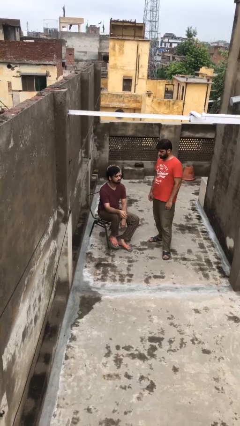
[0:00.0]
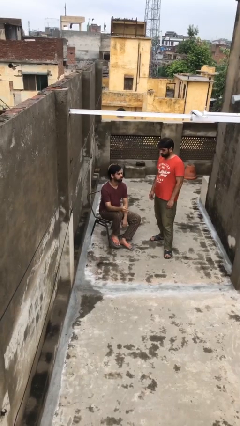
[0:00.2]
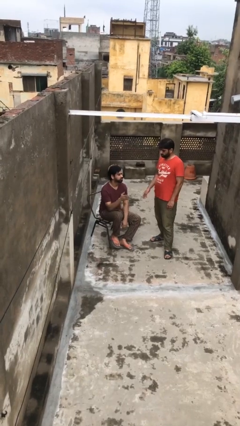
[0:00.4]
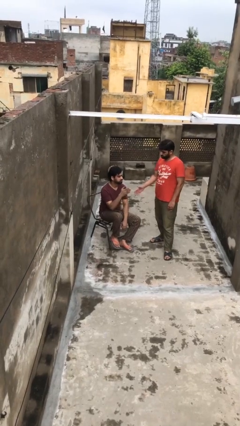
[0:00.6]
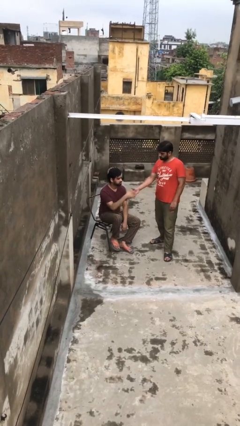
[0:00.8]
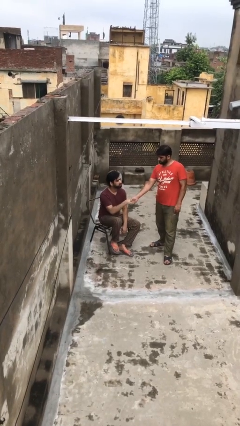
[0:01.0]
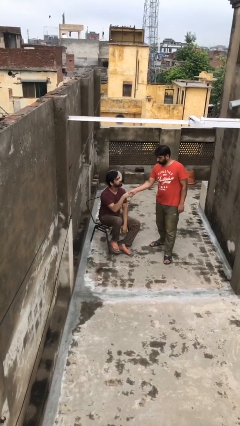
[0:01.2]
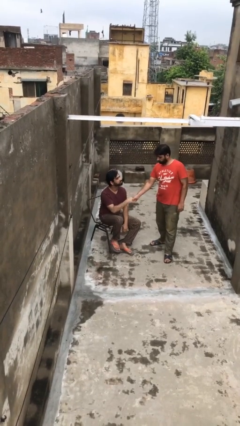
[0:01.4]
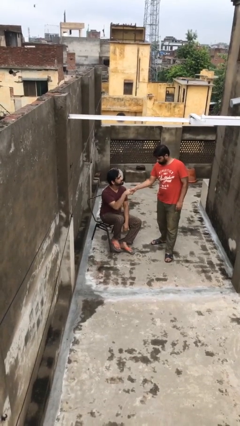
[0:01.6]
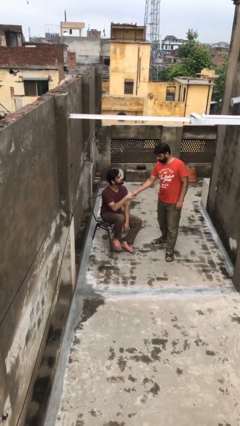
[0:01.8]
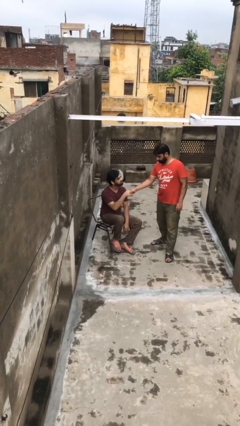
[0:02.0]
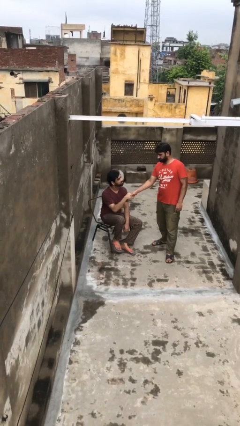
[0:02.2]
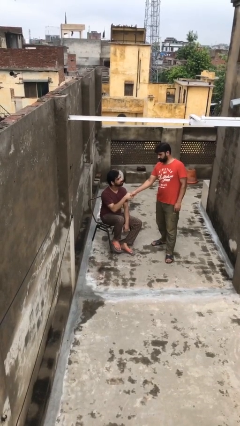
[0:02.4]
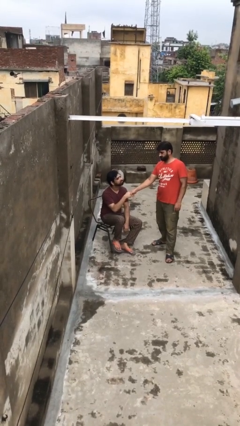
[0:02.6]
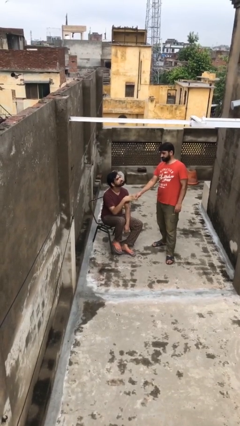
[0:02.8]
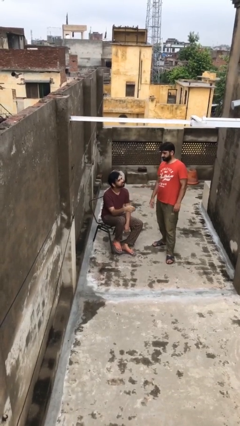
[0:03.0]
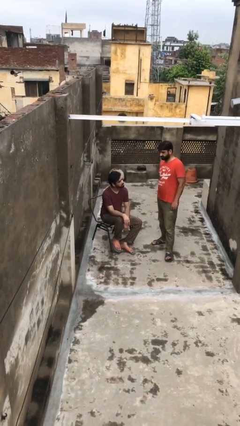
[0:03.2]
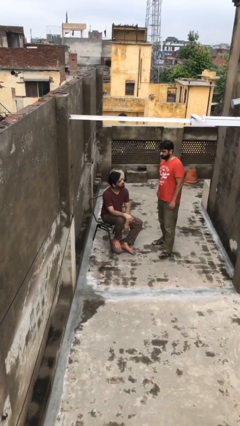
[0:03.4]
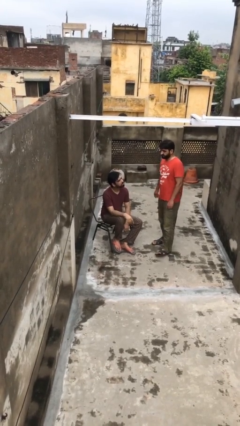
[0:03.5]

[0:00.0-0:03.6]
person shakes hand

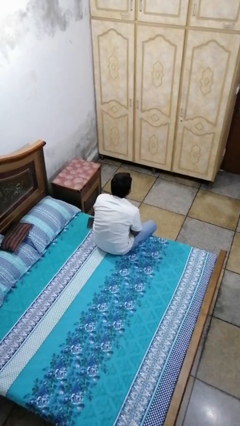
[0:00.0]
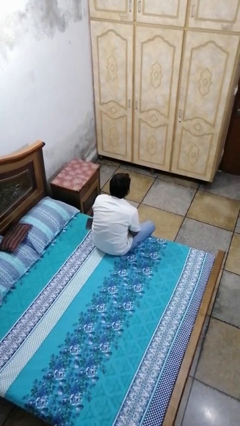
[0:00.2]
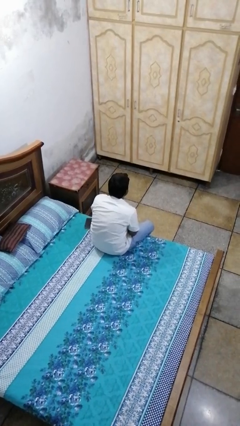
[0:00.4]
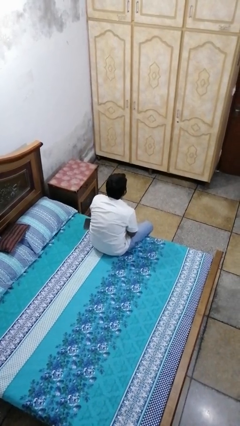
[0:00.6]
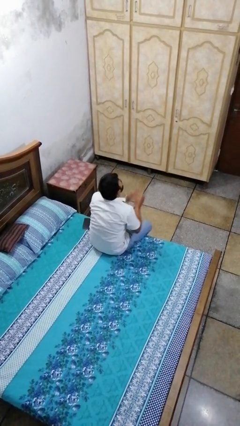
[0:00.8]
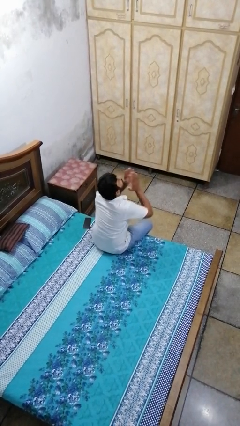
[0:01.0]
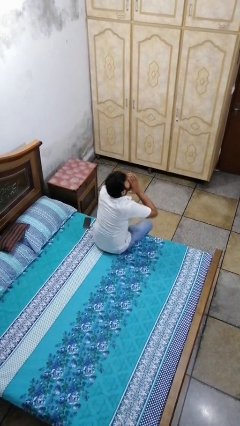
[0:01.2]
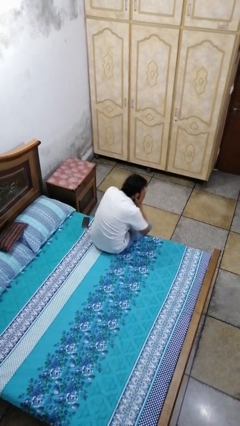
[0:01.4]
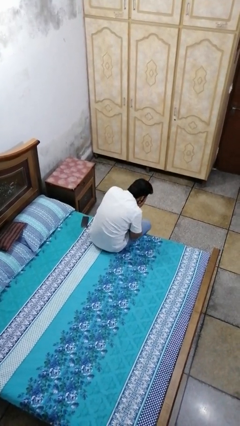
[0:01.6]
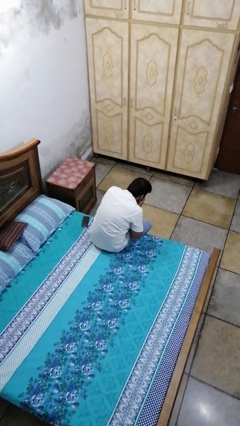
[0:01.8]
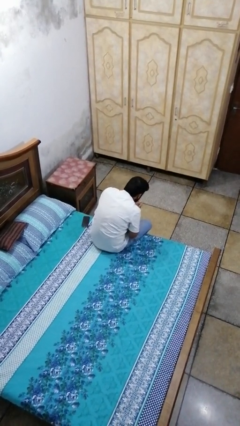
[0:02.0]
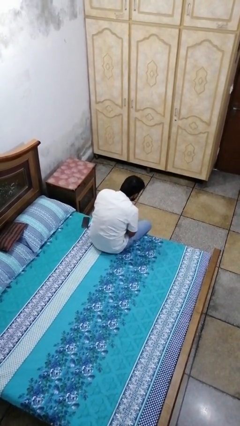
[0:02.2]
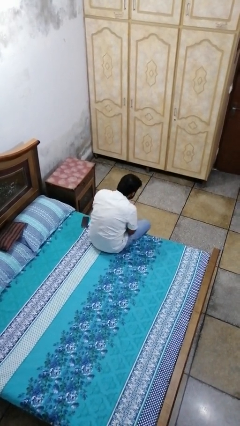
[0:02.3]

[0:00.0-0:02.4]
person sneezes into hand

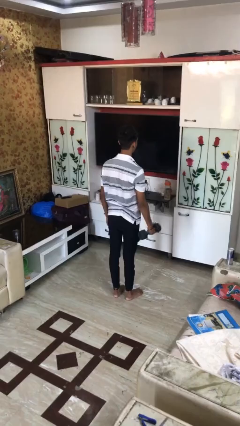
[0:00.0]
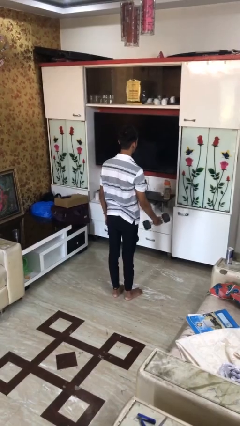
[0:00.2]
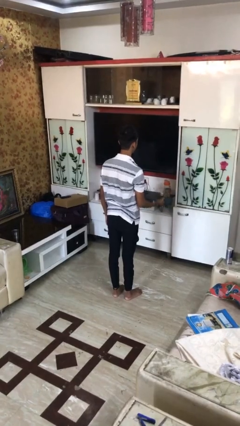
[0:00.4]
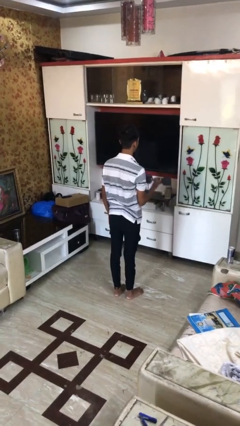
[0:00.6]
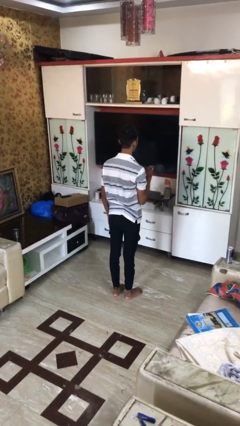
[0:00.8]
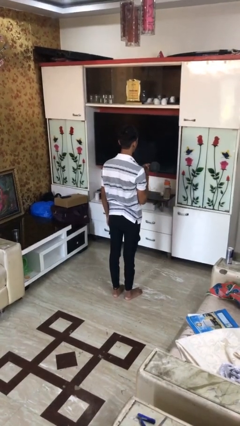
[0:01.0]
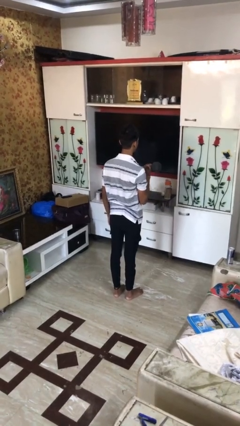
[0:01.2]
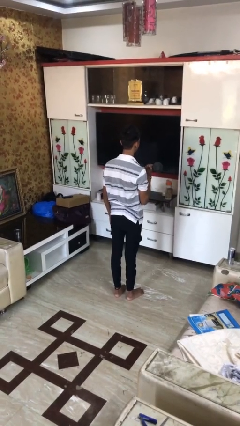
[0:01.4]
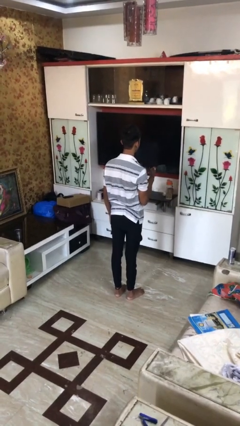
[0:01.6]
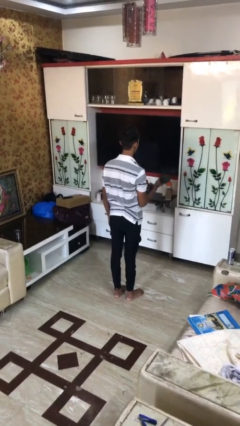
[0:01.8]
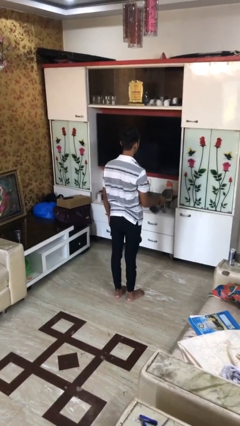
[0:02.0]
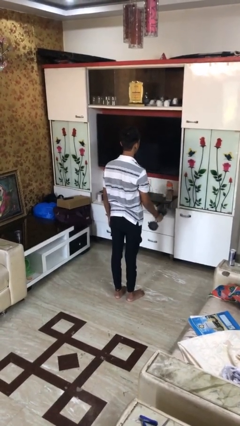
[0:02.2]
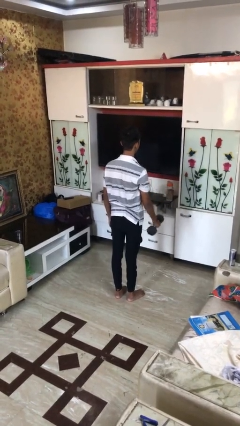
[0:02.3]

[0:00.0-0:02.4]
person lifts dumbbells

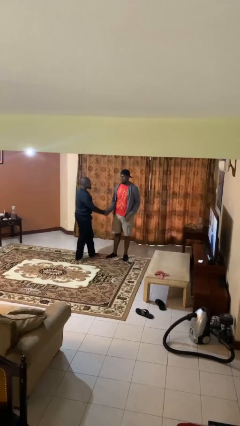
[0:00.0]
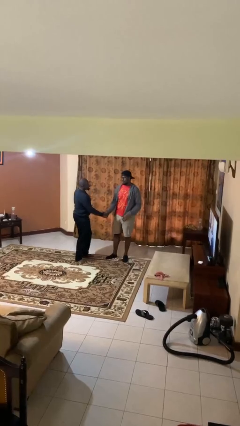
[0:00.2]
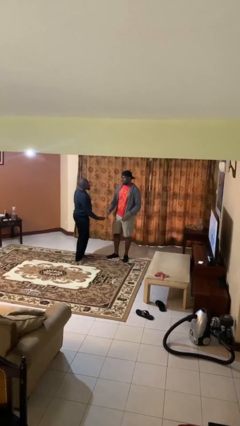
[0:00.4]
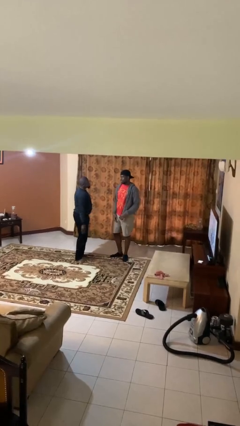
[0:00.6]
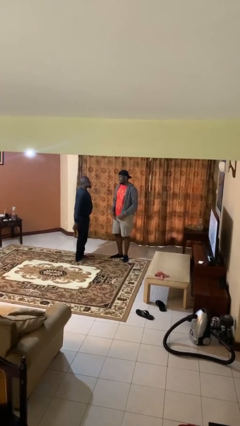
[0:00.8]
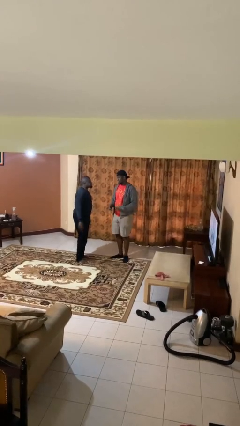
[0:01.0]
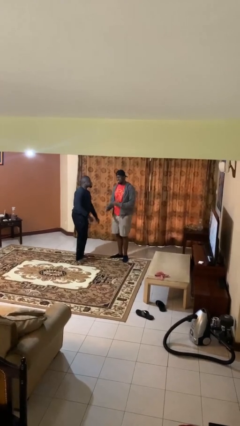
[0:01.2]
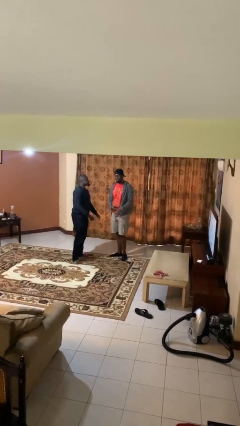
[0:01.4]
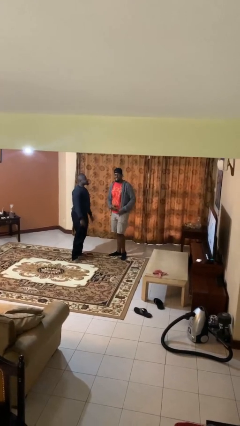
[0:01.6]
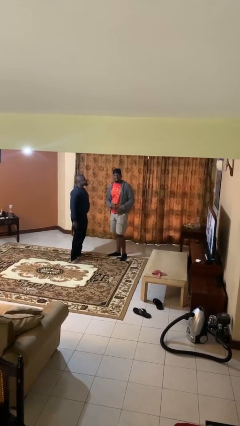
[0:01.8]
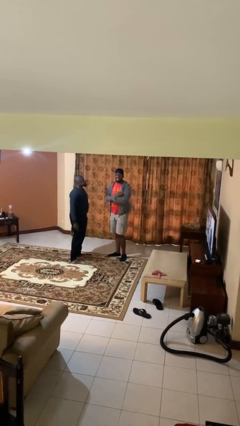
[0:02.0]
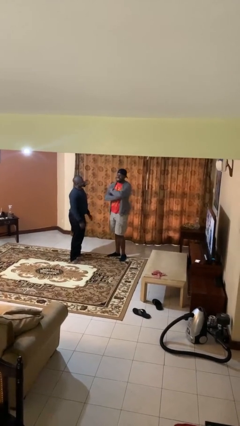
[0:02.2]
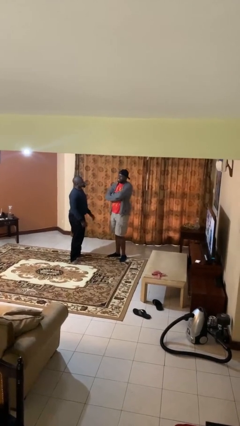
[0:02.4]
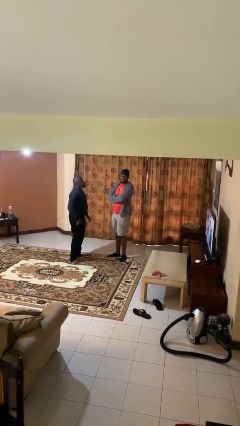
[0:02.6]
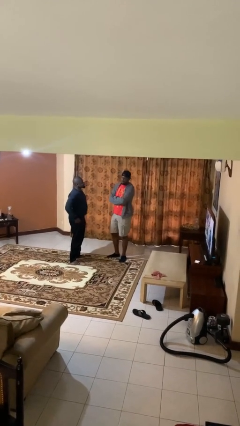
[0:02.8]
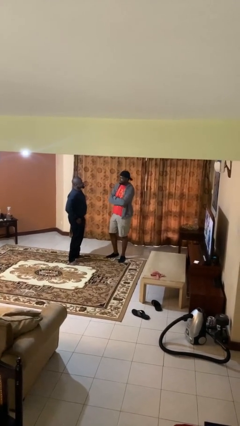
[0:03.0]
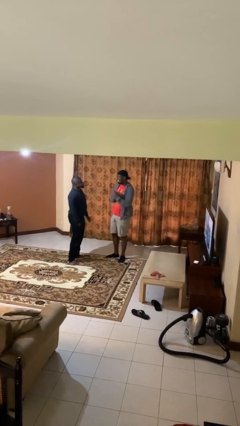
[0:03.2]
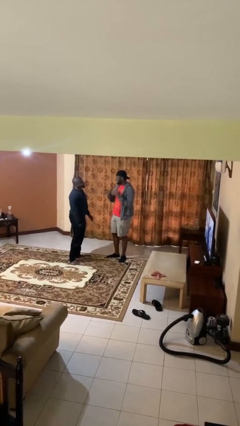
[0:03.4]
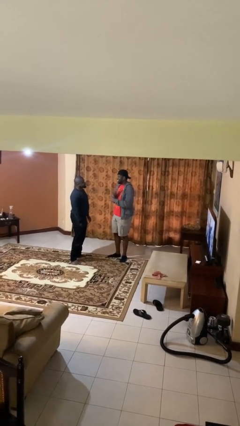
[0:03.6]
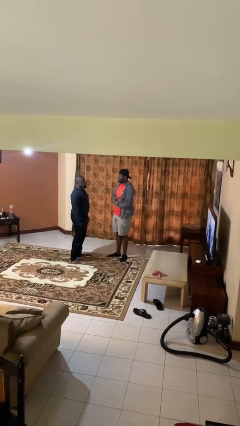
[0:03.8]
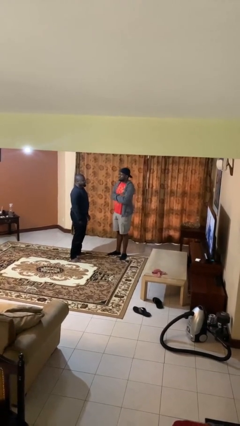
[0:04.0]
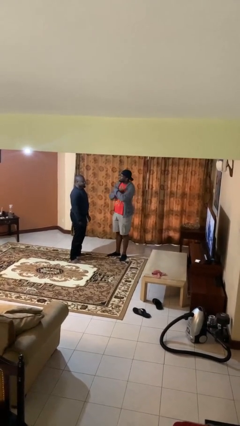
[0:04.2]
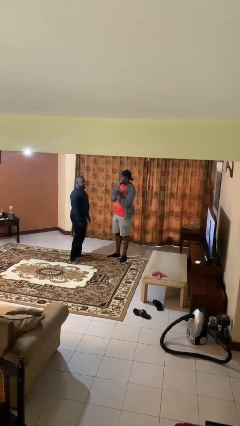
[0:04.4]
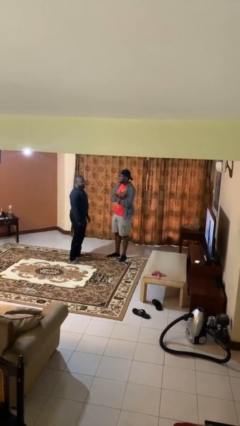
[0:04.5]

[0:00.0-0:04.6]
person talks to person

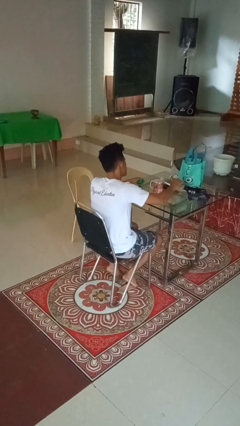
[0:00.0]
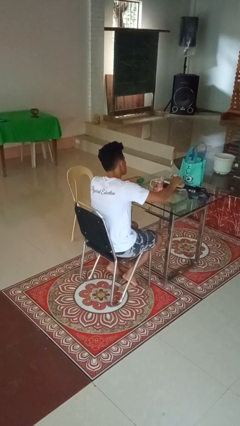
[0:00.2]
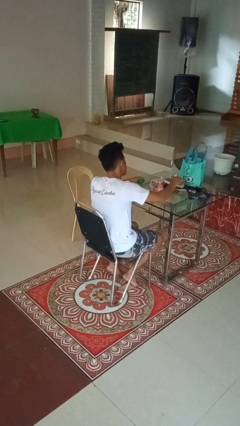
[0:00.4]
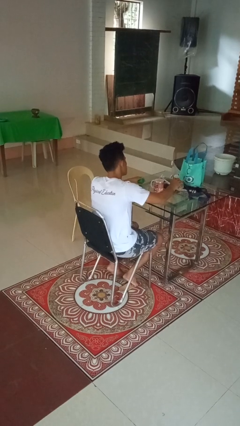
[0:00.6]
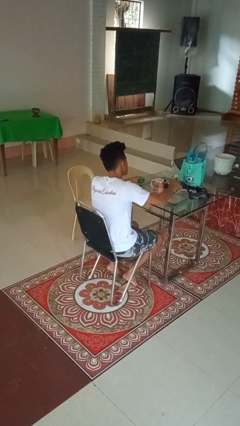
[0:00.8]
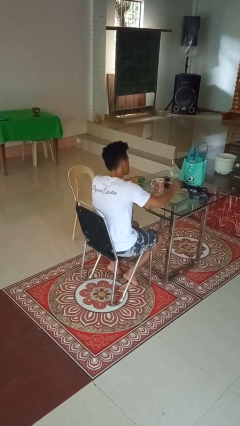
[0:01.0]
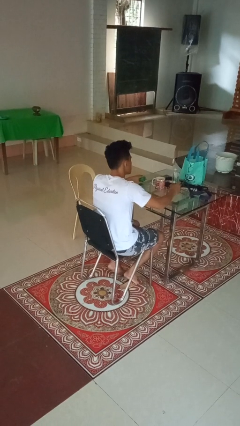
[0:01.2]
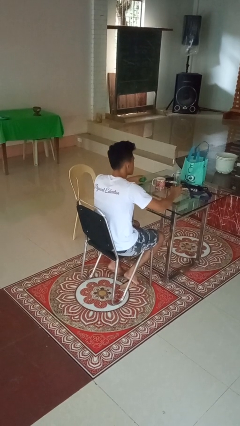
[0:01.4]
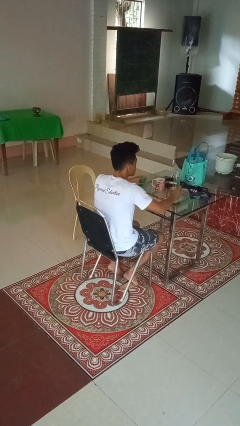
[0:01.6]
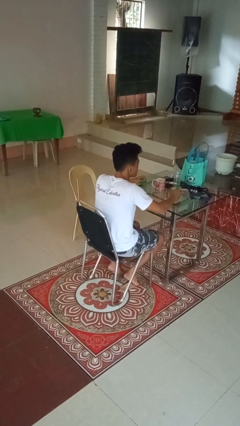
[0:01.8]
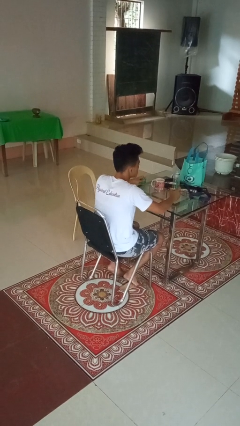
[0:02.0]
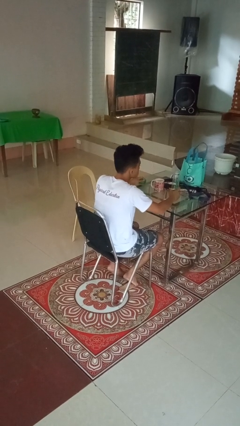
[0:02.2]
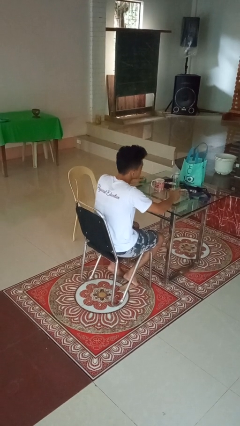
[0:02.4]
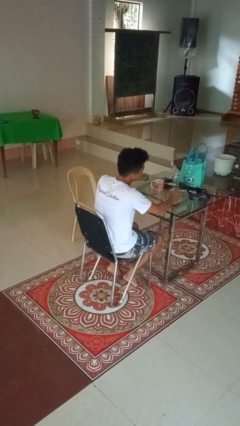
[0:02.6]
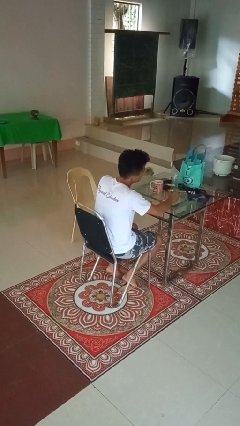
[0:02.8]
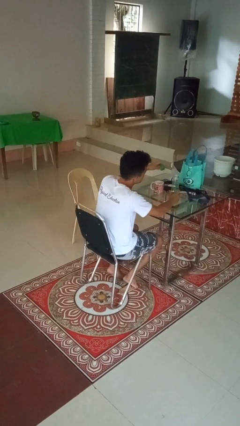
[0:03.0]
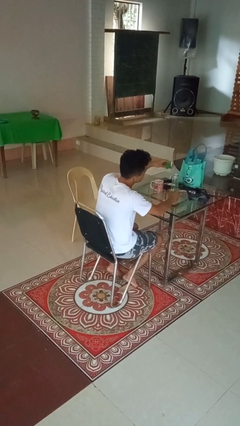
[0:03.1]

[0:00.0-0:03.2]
person pours liquid into cup

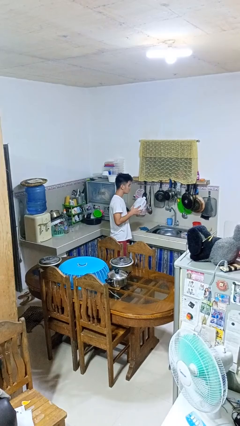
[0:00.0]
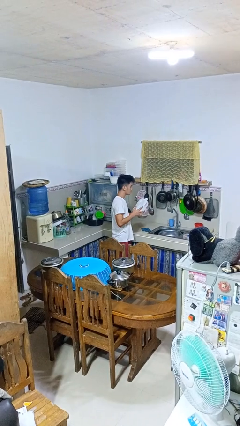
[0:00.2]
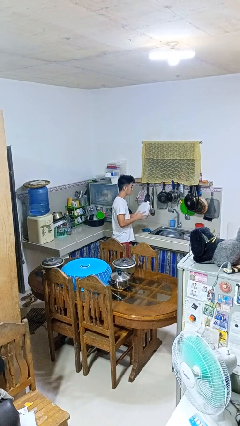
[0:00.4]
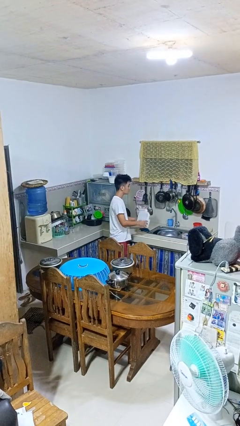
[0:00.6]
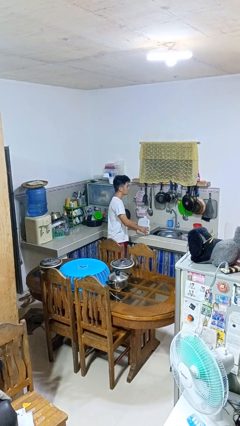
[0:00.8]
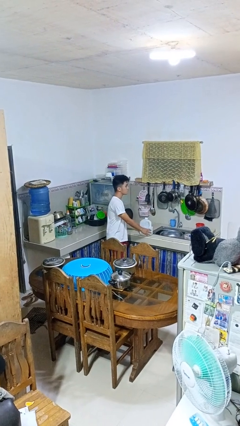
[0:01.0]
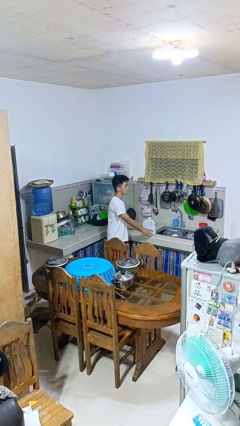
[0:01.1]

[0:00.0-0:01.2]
person puts down object on countertop

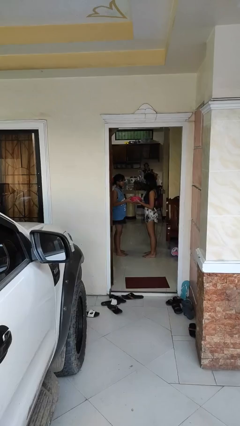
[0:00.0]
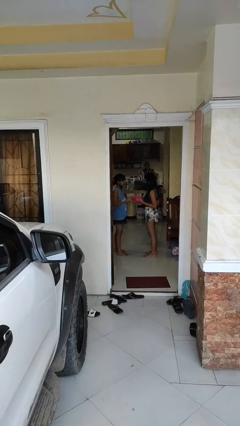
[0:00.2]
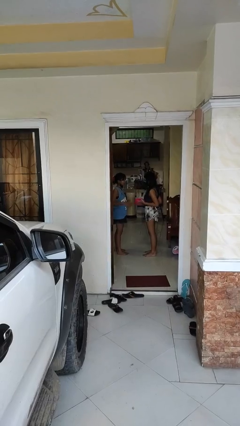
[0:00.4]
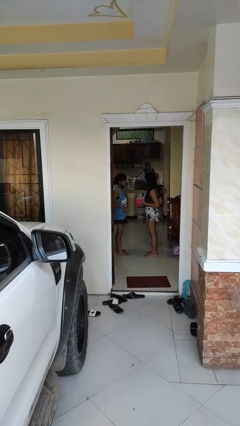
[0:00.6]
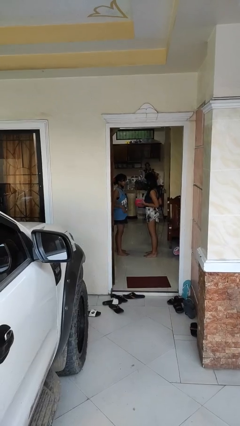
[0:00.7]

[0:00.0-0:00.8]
person transfers object to person
